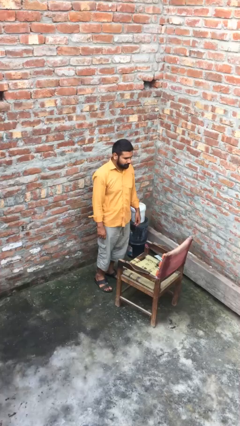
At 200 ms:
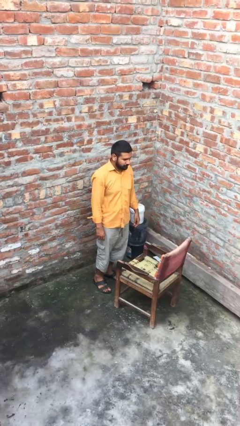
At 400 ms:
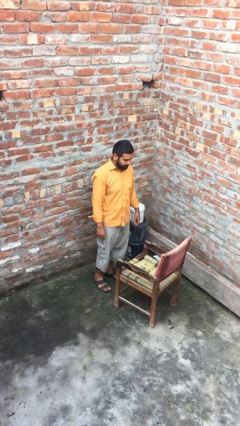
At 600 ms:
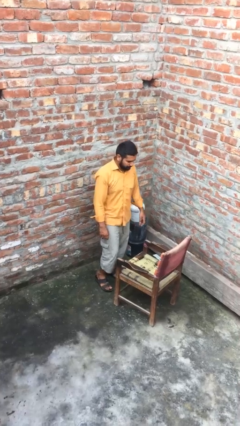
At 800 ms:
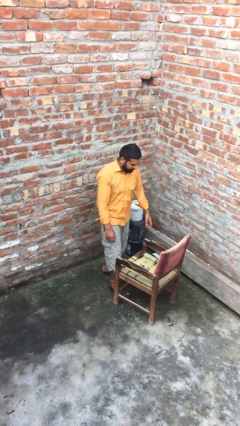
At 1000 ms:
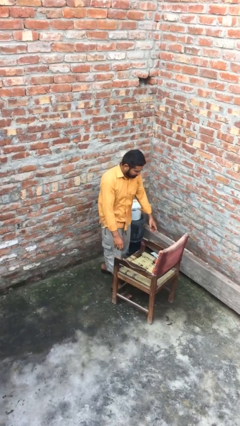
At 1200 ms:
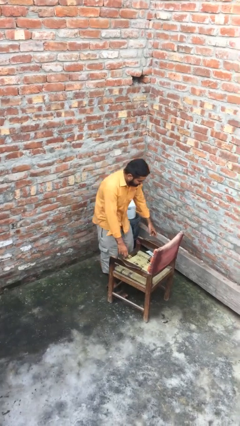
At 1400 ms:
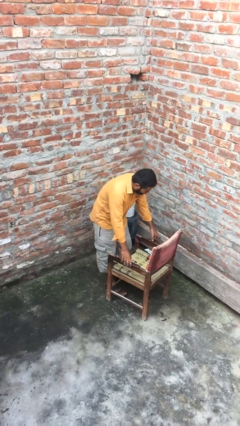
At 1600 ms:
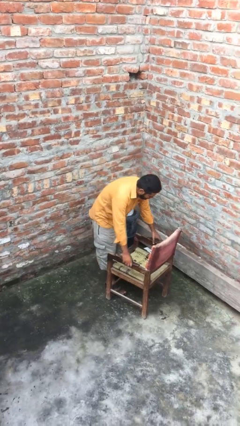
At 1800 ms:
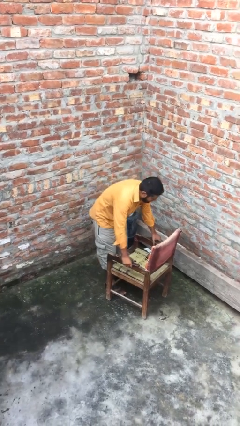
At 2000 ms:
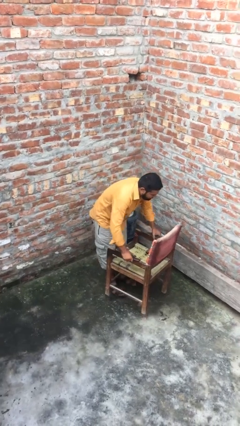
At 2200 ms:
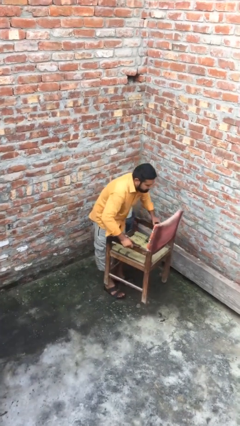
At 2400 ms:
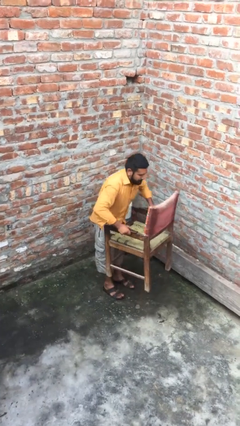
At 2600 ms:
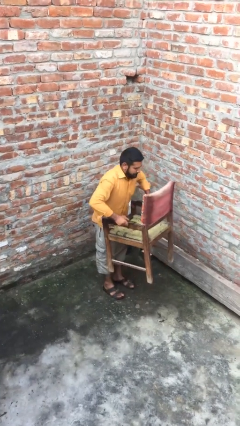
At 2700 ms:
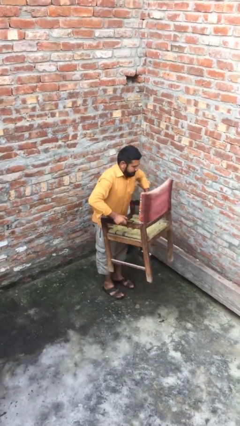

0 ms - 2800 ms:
person picks up object from floor

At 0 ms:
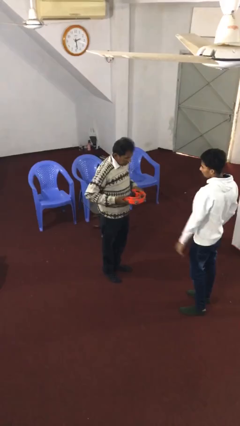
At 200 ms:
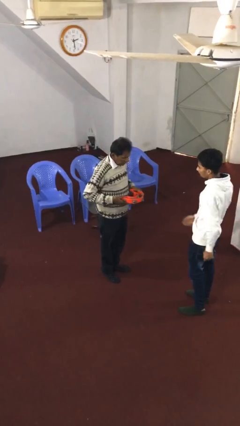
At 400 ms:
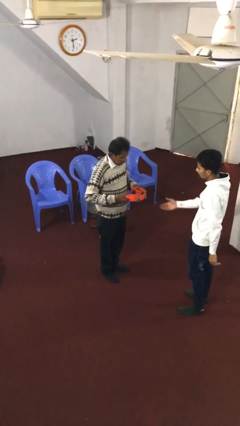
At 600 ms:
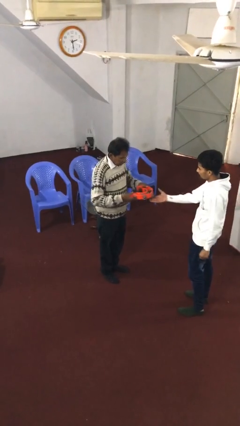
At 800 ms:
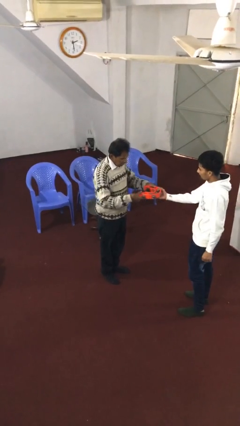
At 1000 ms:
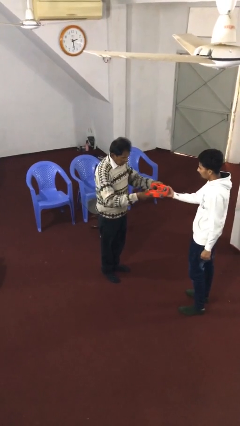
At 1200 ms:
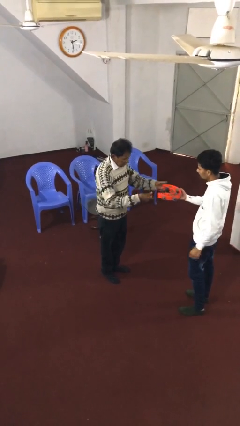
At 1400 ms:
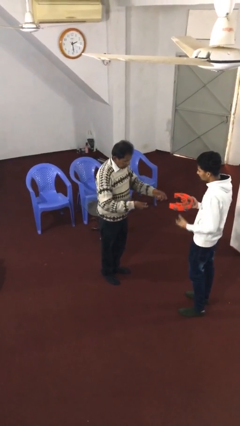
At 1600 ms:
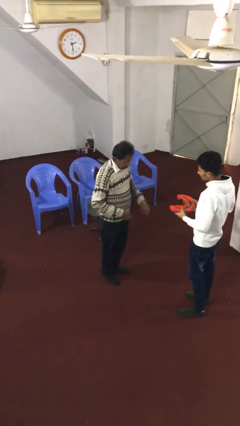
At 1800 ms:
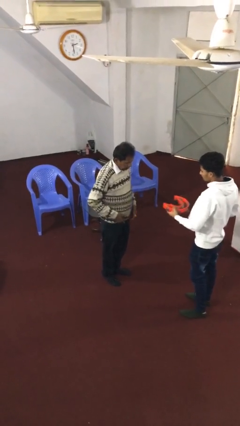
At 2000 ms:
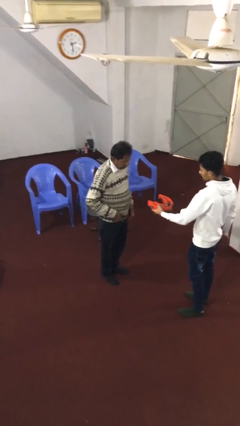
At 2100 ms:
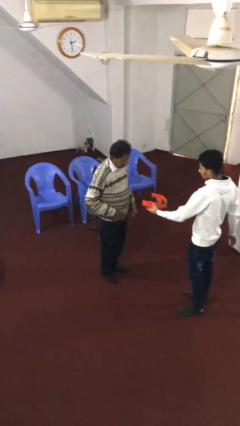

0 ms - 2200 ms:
person transfers object to person

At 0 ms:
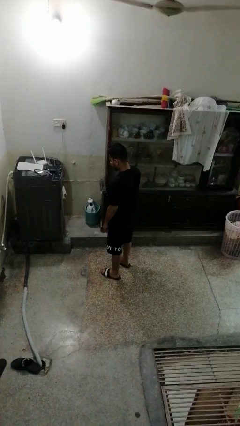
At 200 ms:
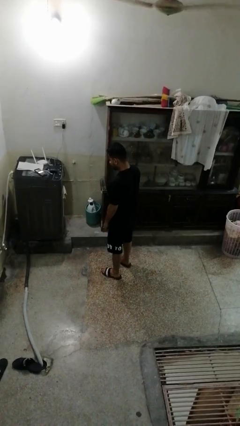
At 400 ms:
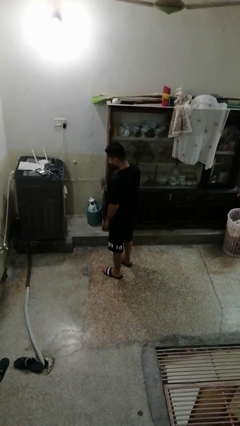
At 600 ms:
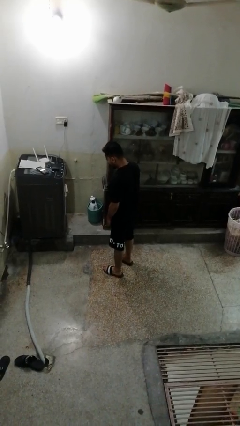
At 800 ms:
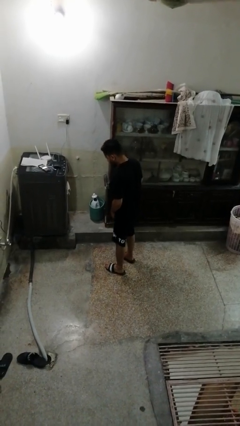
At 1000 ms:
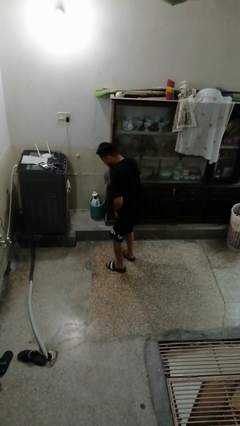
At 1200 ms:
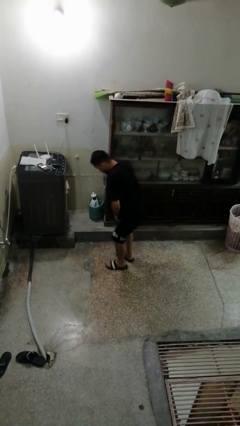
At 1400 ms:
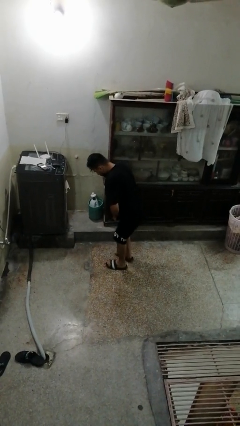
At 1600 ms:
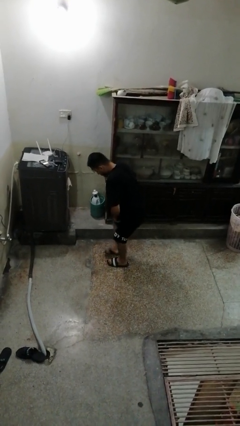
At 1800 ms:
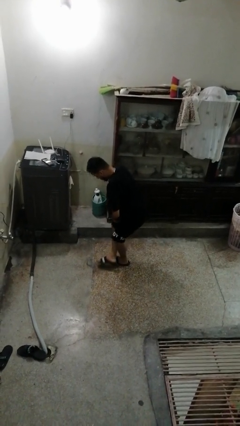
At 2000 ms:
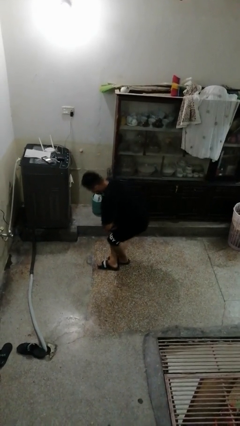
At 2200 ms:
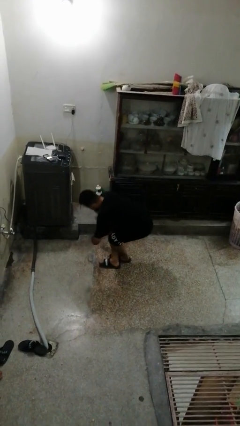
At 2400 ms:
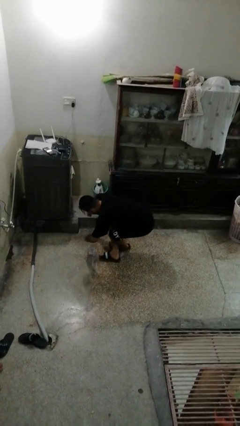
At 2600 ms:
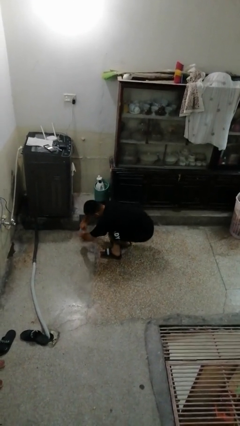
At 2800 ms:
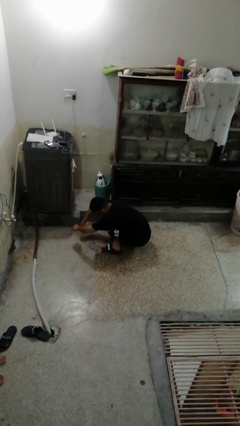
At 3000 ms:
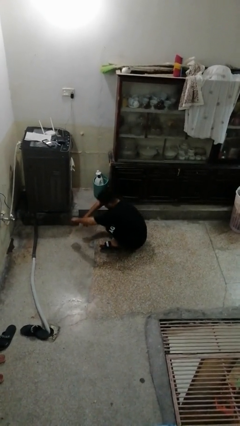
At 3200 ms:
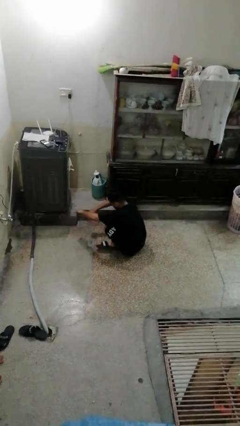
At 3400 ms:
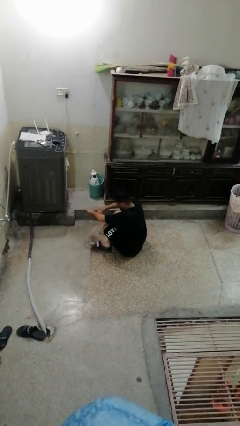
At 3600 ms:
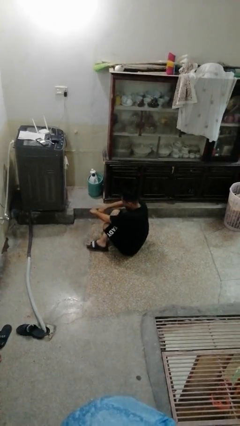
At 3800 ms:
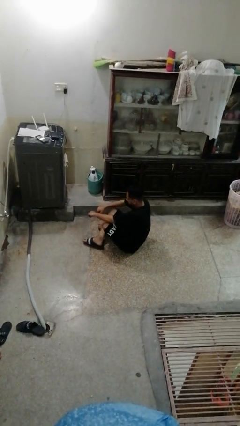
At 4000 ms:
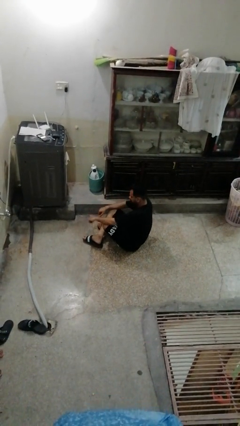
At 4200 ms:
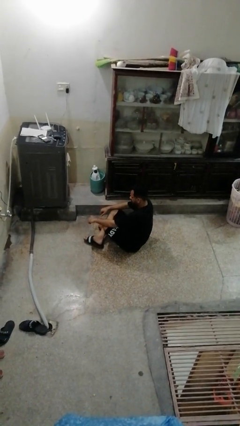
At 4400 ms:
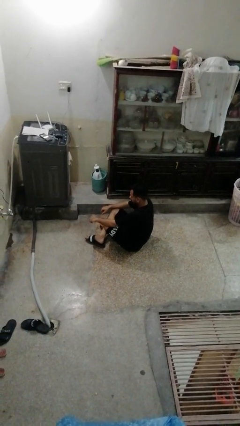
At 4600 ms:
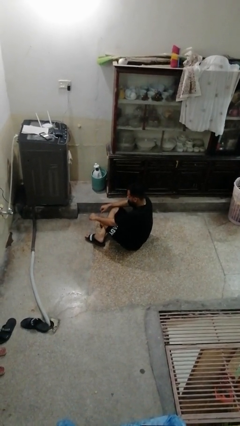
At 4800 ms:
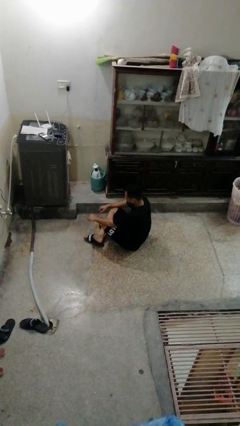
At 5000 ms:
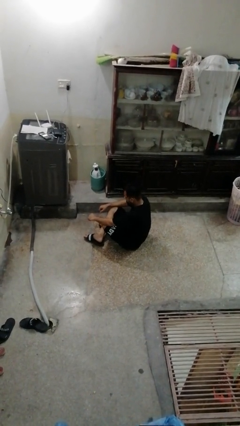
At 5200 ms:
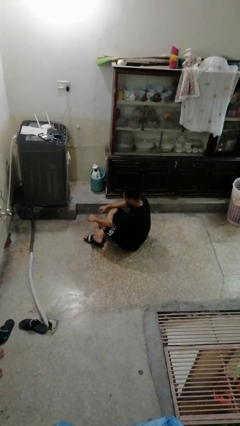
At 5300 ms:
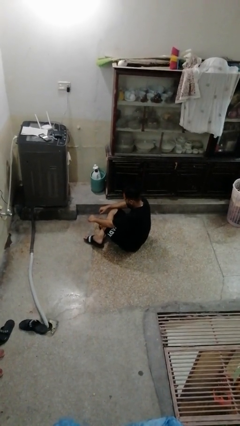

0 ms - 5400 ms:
person sits crisscross

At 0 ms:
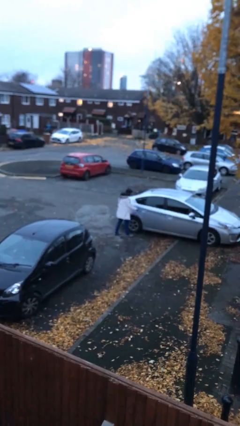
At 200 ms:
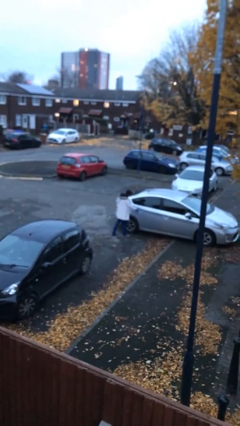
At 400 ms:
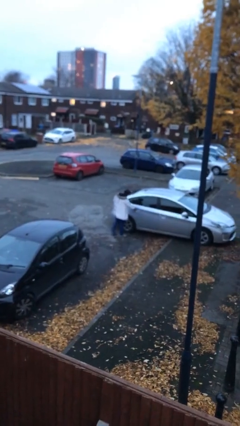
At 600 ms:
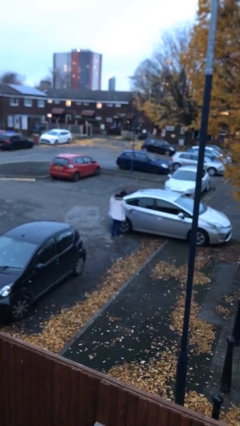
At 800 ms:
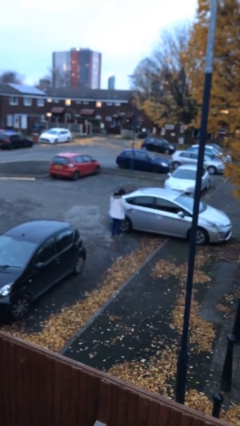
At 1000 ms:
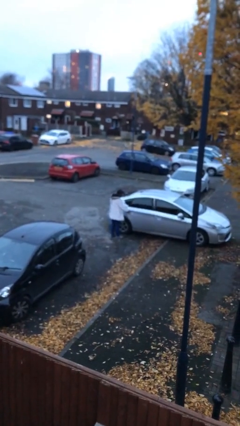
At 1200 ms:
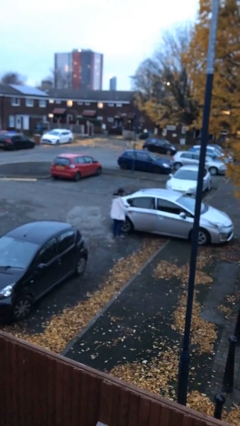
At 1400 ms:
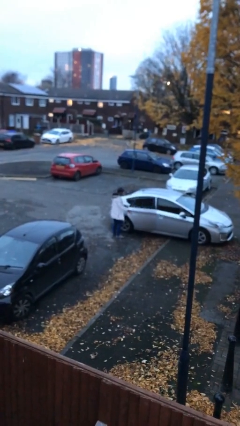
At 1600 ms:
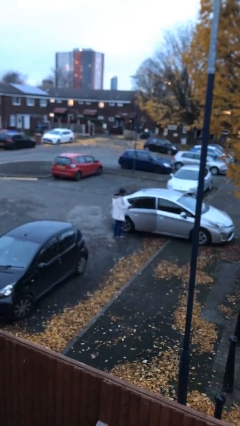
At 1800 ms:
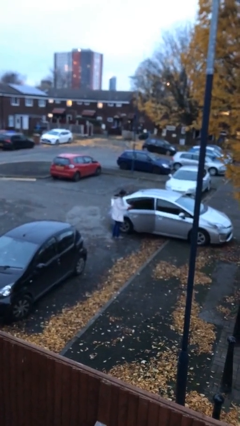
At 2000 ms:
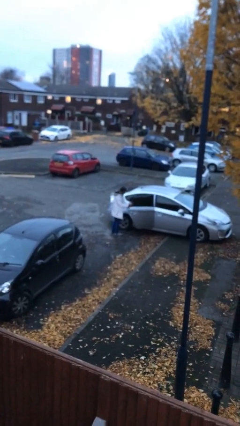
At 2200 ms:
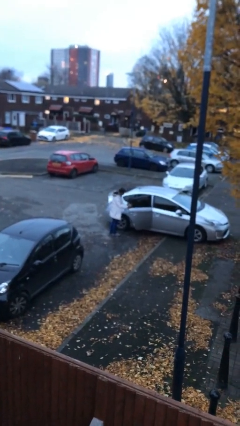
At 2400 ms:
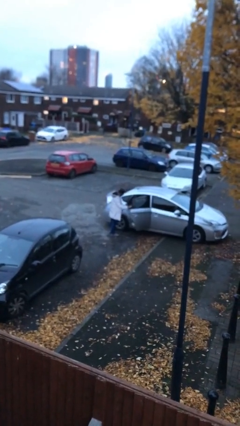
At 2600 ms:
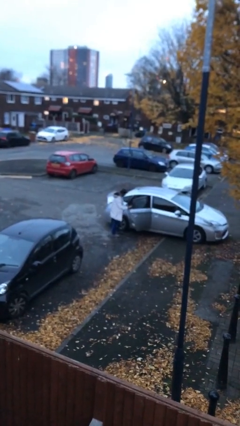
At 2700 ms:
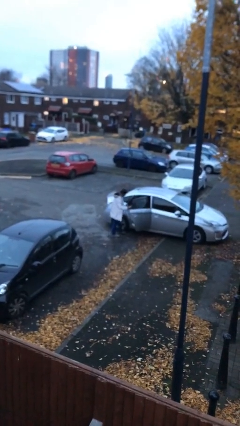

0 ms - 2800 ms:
person opens car door

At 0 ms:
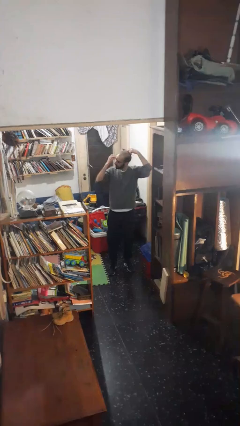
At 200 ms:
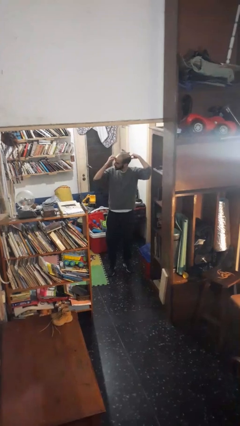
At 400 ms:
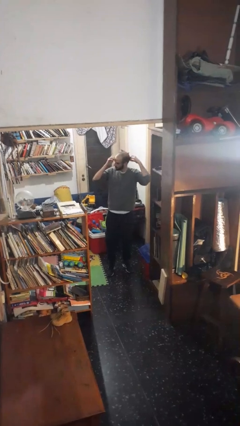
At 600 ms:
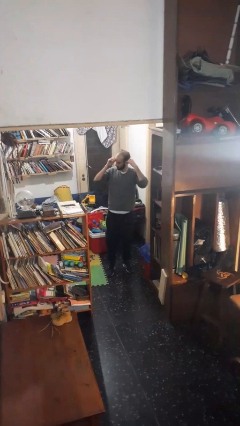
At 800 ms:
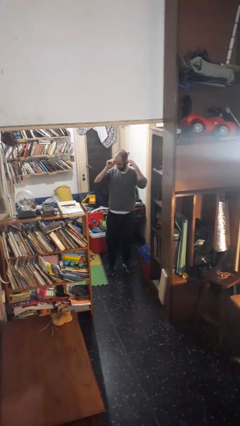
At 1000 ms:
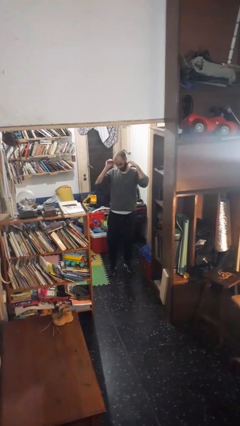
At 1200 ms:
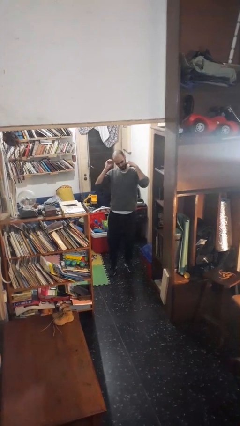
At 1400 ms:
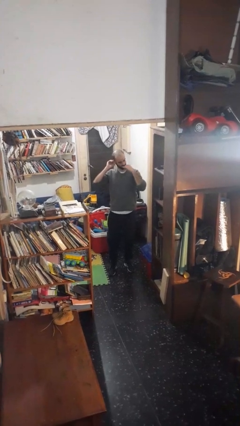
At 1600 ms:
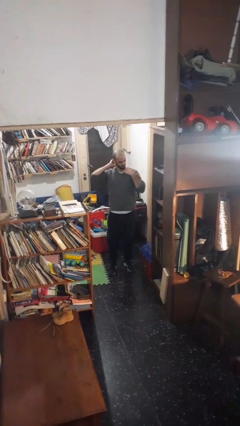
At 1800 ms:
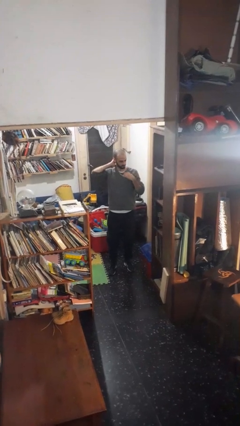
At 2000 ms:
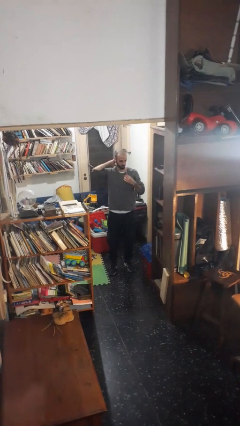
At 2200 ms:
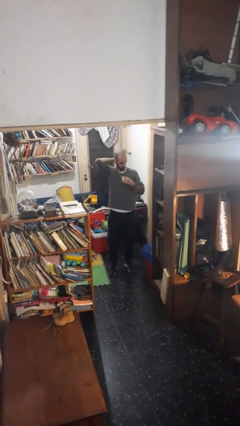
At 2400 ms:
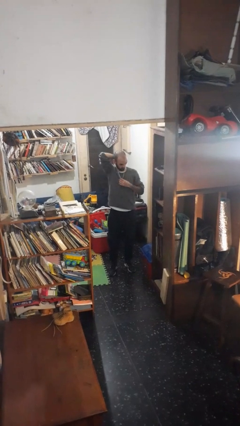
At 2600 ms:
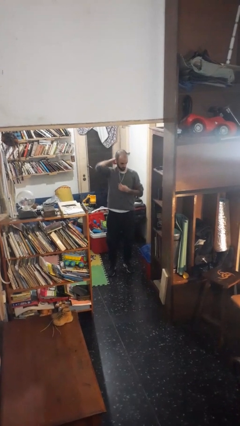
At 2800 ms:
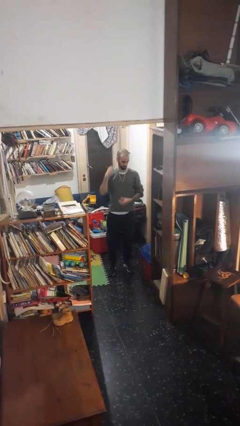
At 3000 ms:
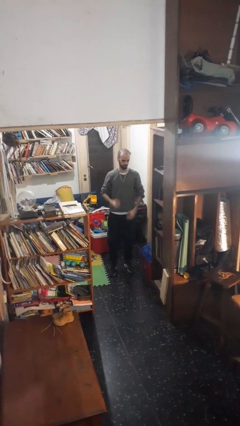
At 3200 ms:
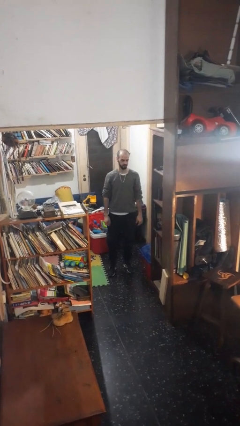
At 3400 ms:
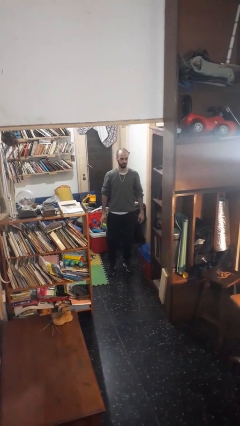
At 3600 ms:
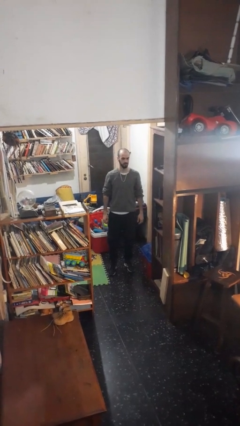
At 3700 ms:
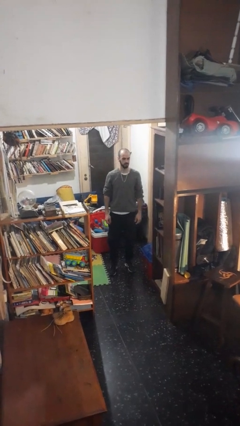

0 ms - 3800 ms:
person puts on necklace

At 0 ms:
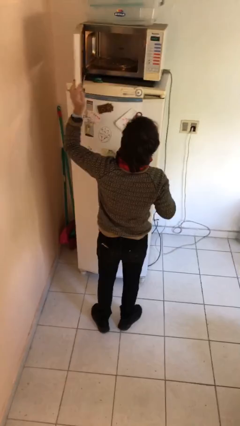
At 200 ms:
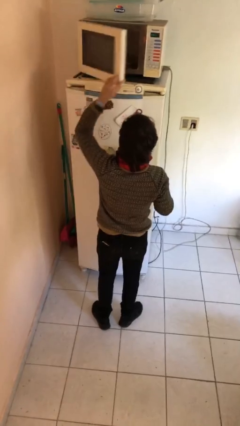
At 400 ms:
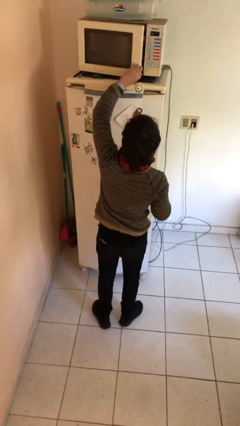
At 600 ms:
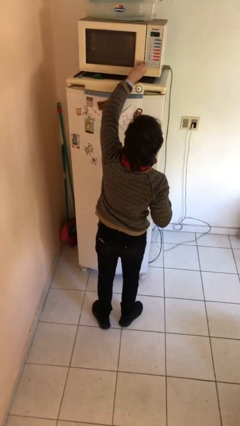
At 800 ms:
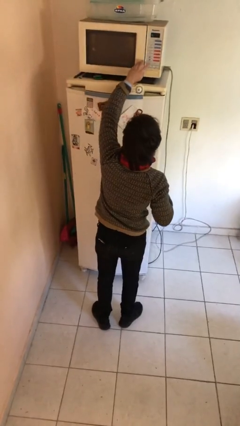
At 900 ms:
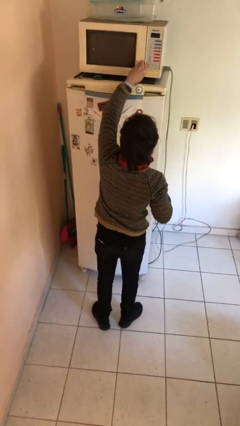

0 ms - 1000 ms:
person closes microwave
